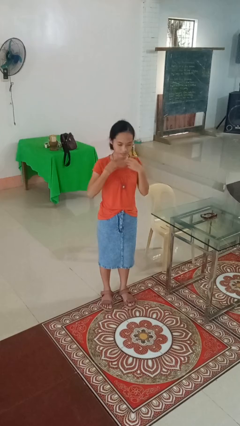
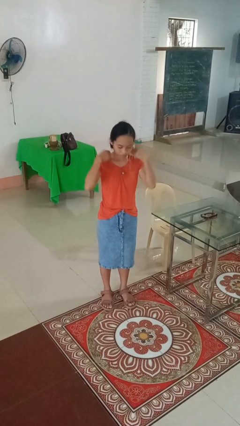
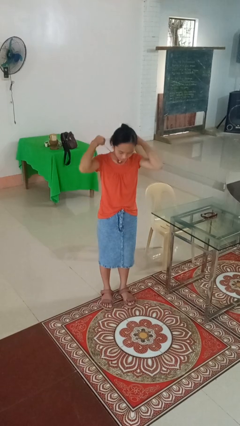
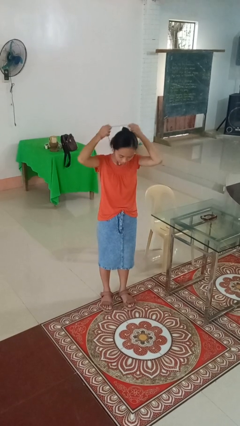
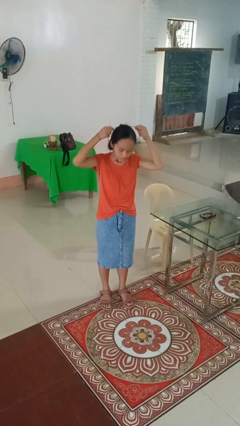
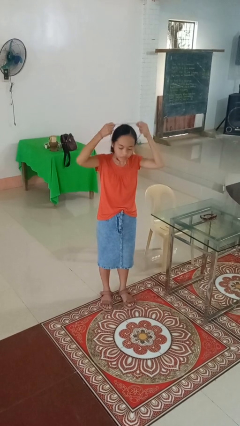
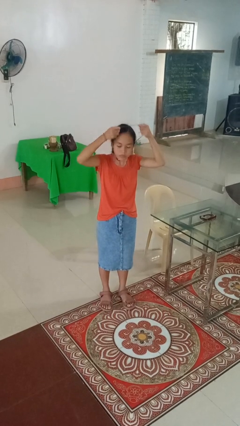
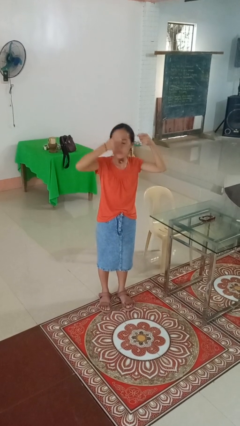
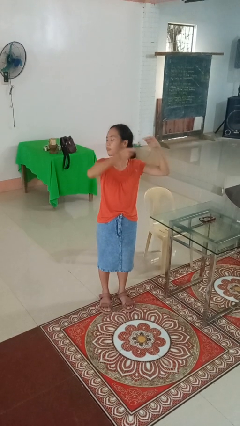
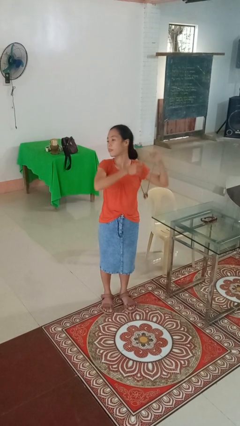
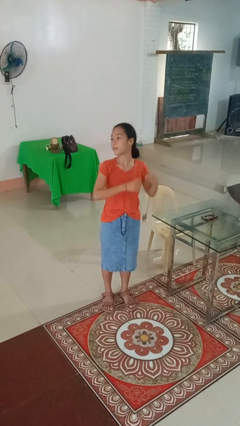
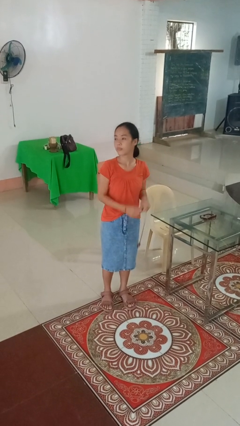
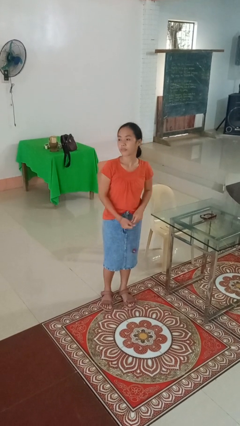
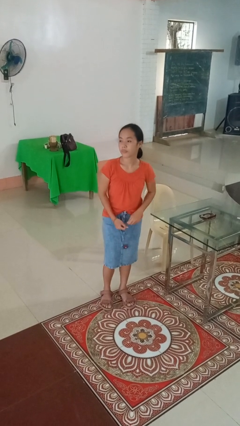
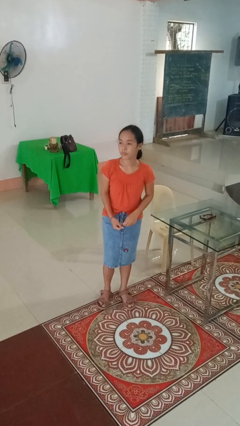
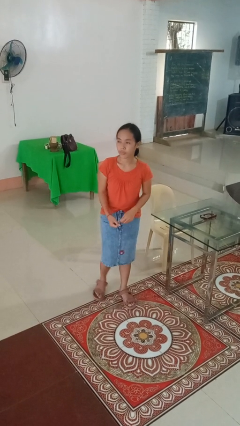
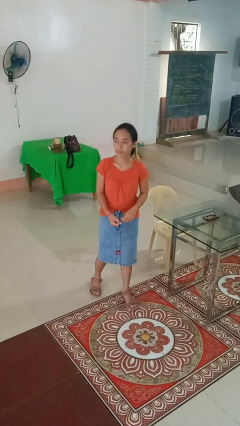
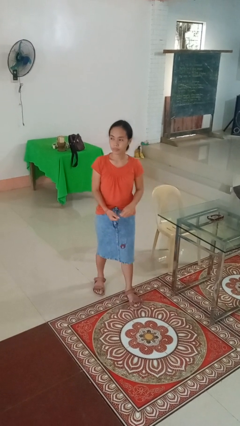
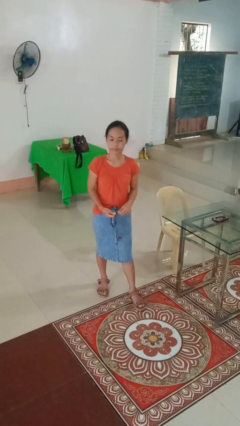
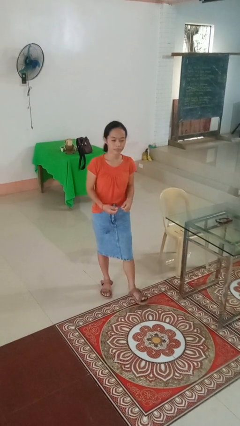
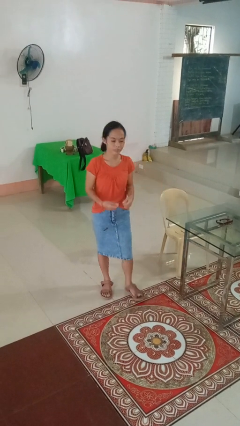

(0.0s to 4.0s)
person takes off necklace

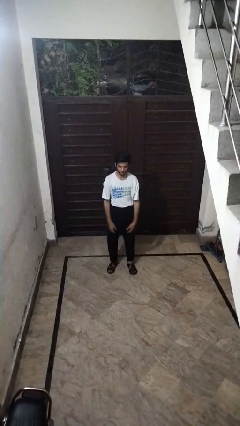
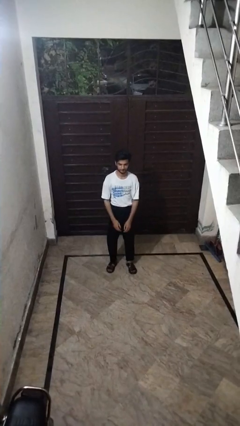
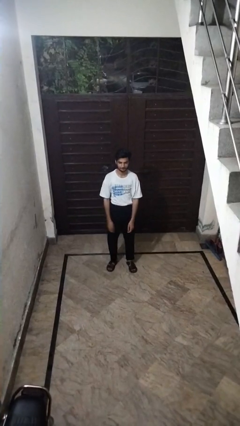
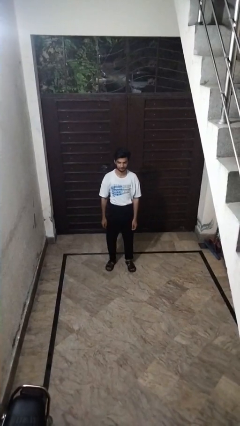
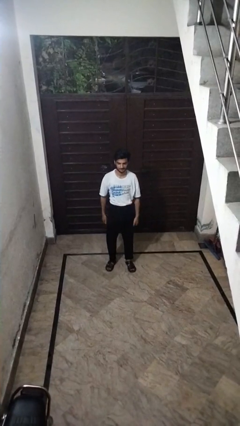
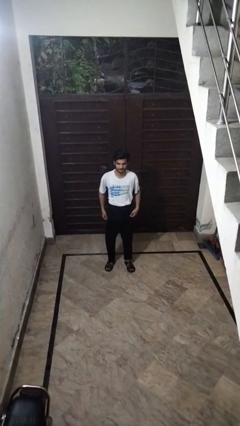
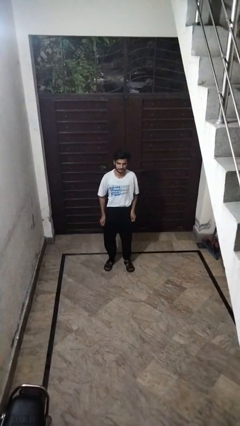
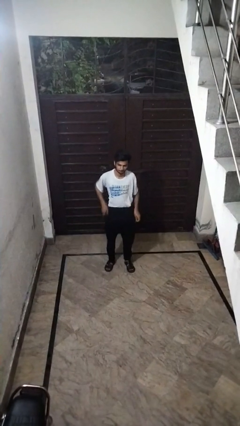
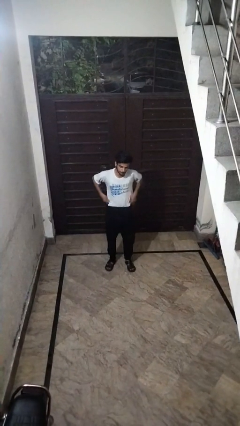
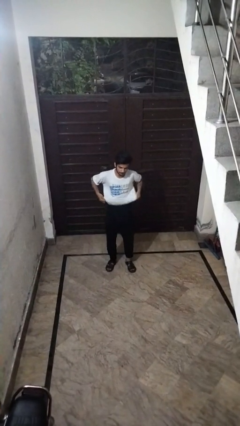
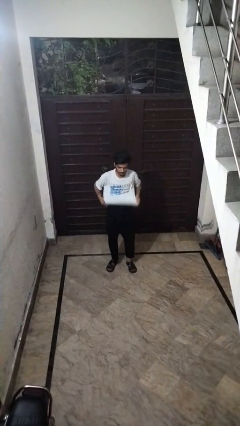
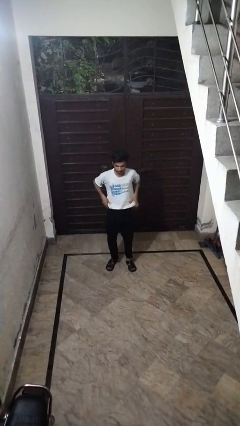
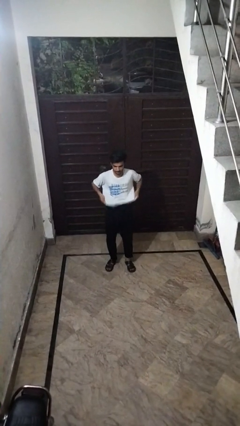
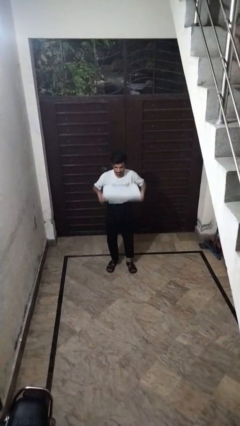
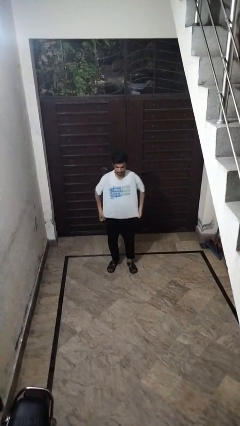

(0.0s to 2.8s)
person opens facility door

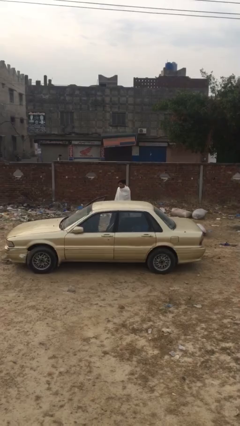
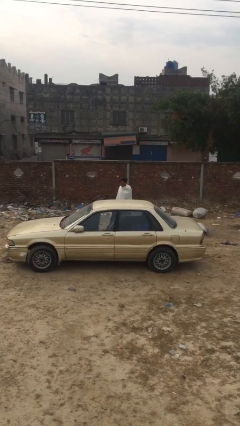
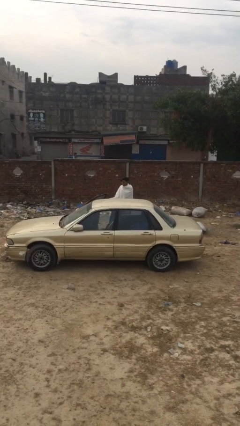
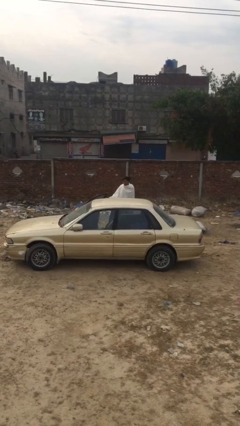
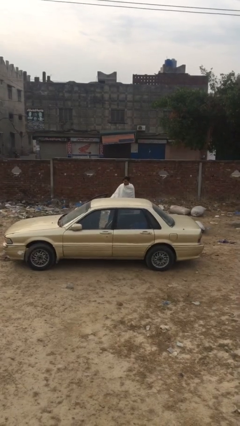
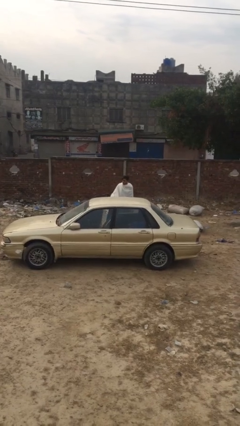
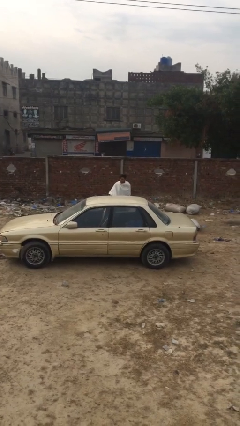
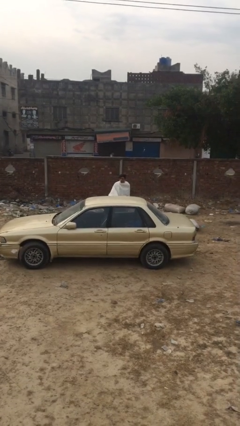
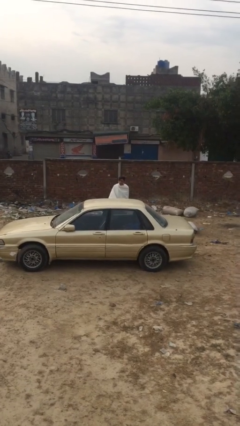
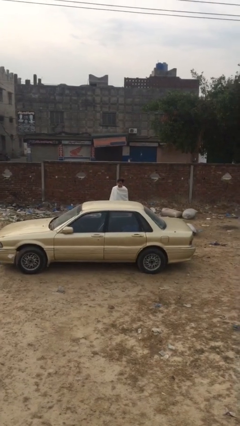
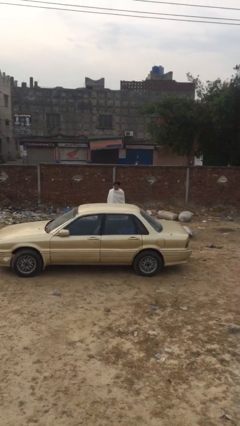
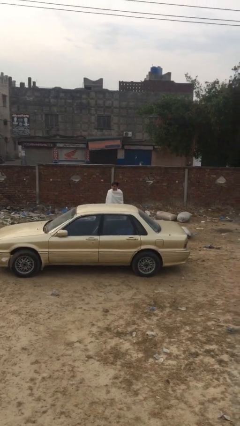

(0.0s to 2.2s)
person closes car door

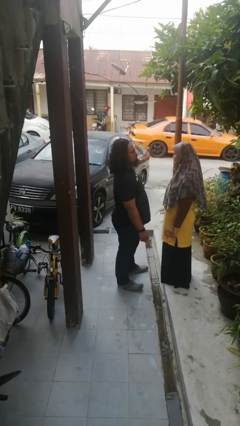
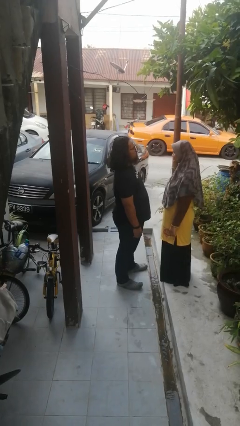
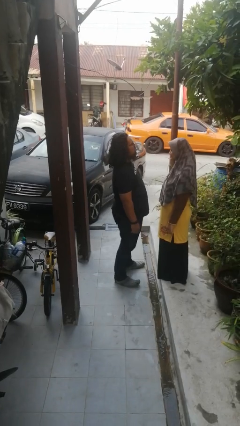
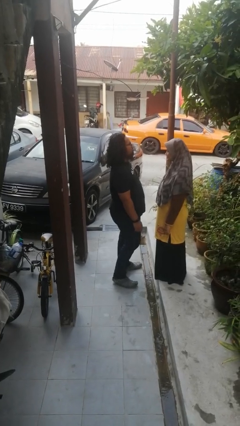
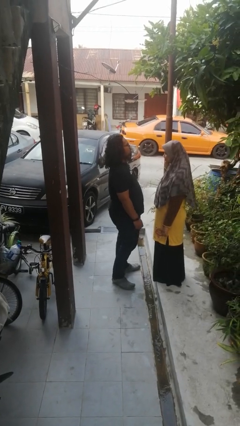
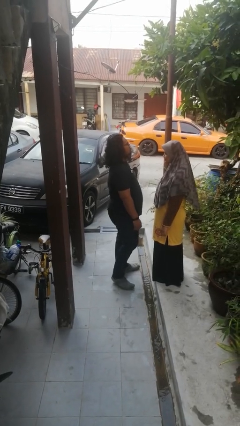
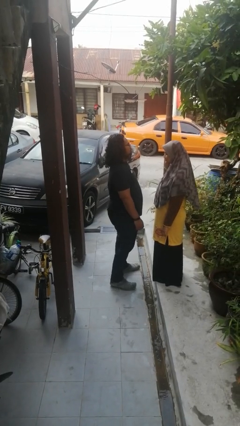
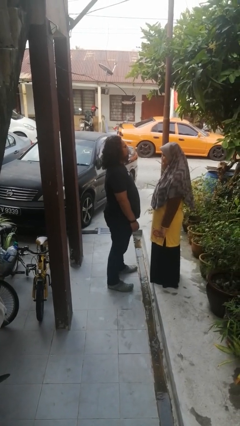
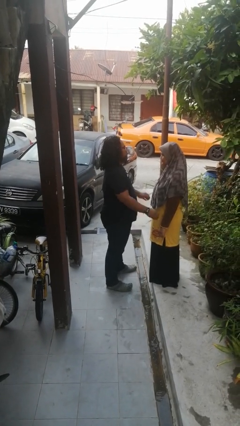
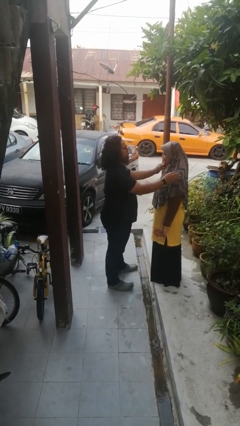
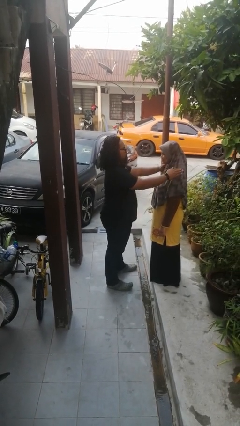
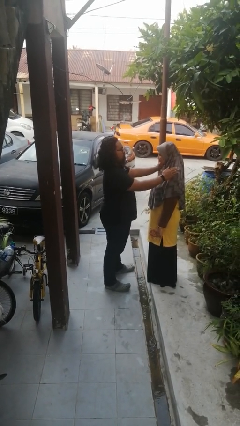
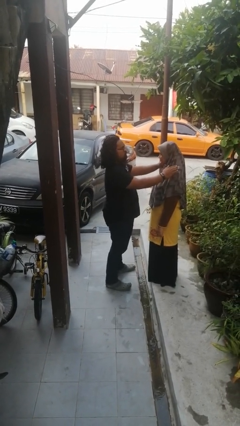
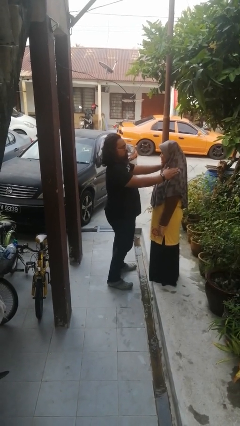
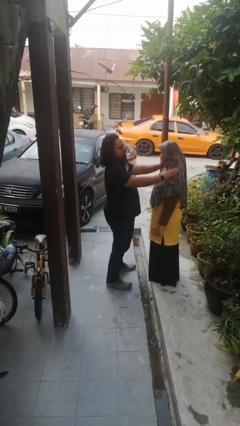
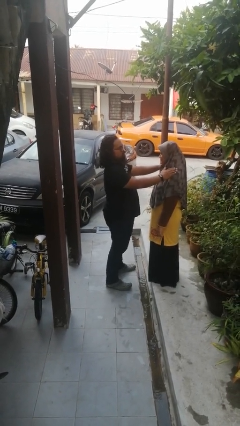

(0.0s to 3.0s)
person pounds shoulders of person

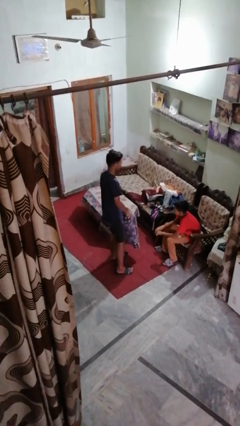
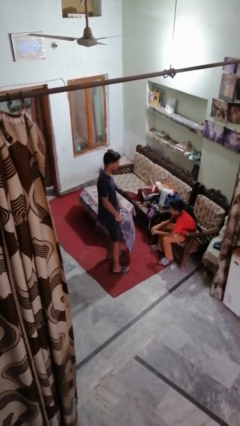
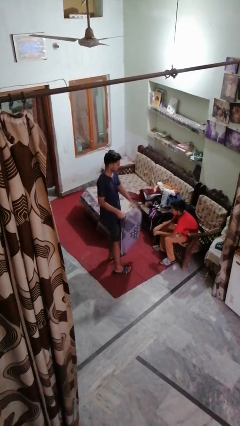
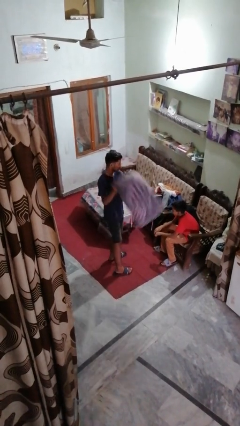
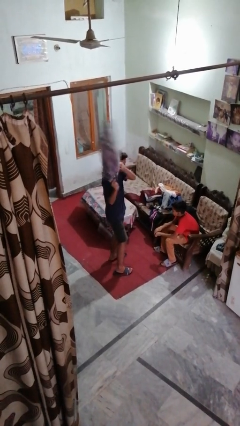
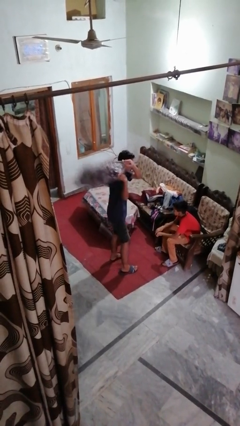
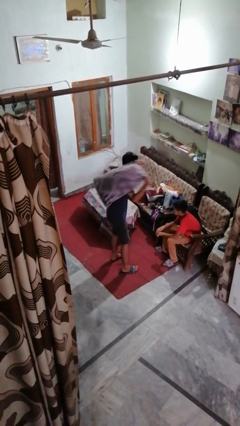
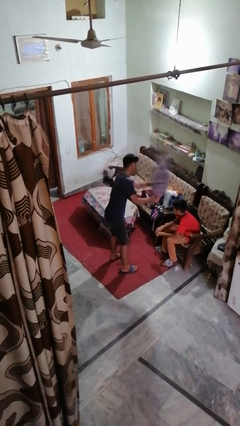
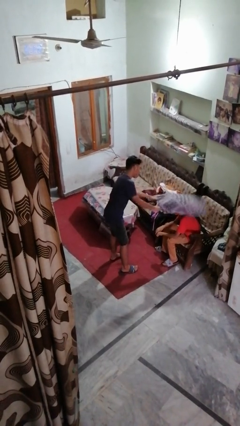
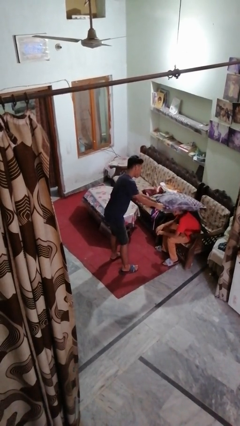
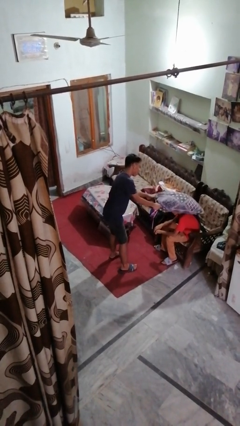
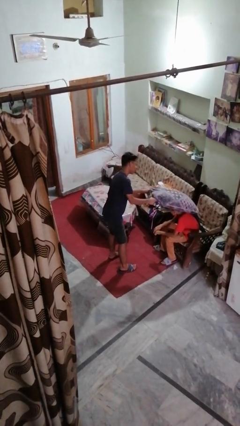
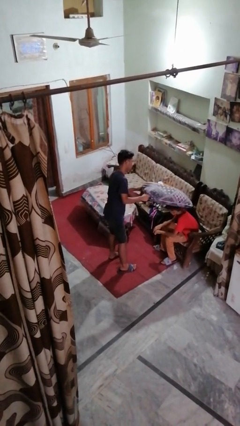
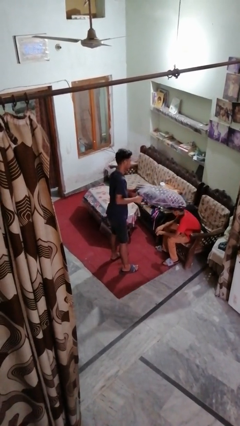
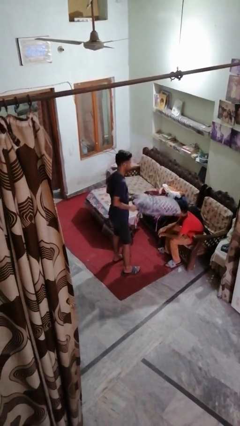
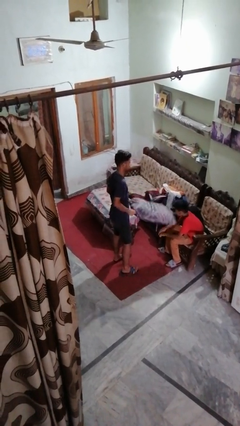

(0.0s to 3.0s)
person hits person with pillow

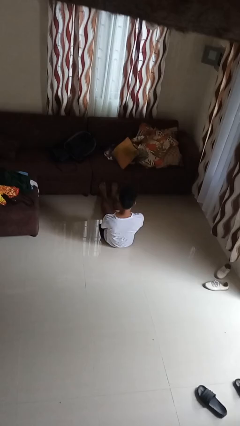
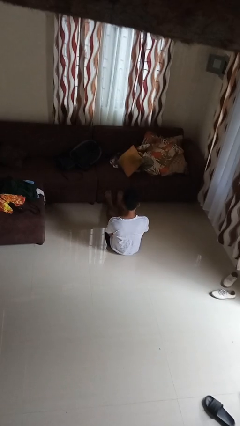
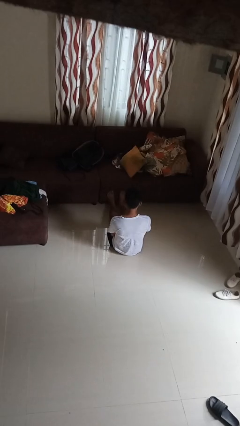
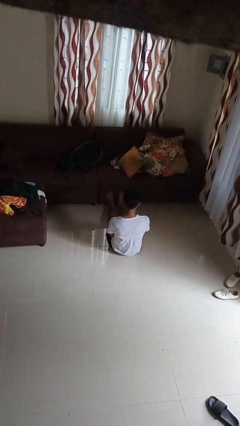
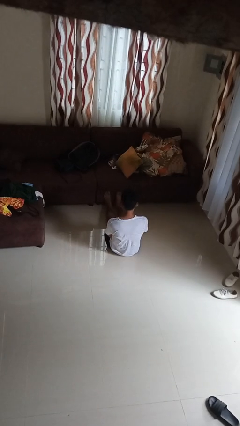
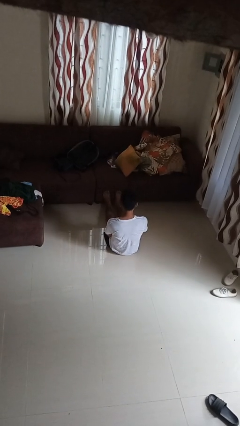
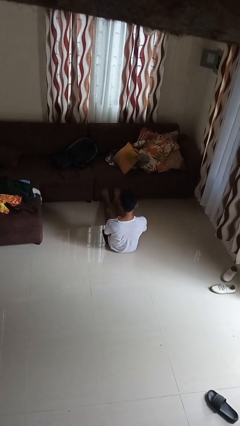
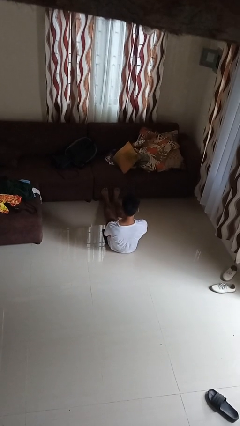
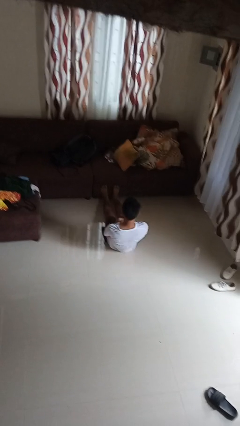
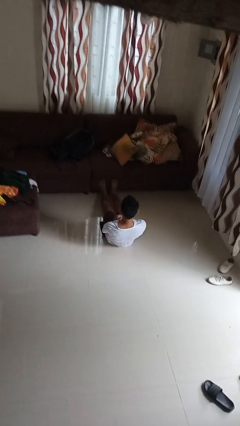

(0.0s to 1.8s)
person exercises with situp
